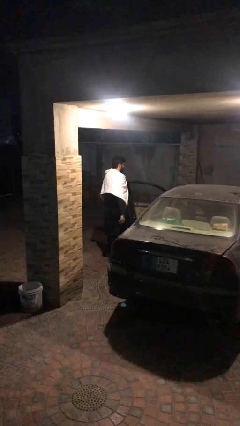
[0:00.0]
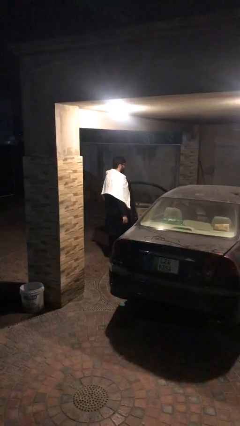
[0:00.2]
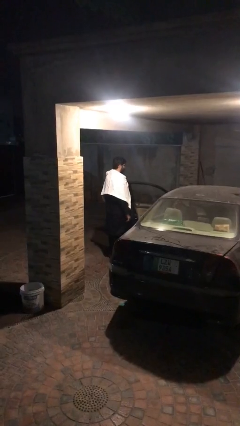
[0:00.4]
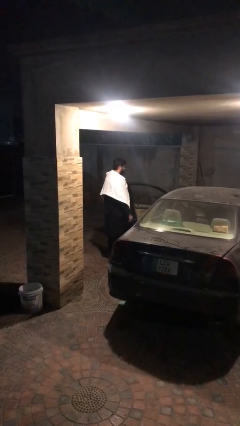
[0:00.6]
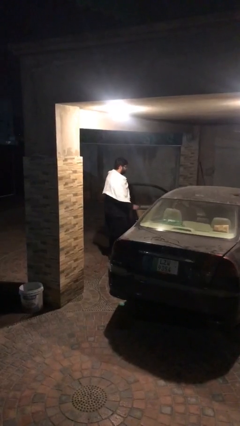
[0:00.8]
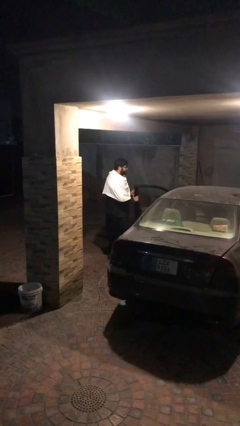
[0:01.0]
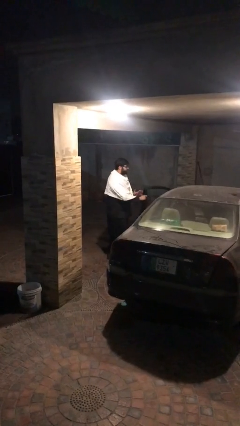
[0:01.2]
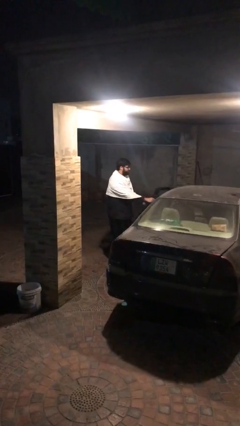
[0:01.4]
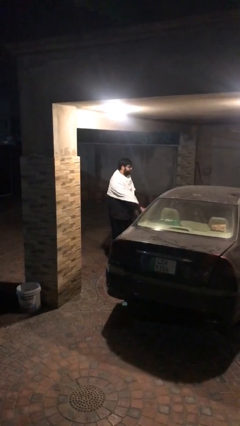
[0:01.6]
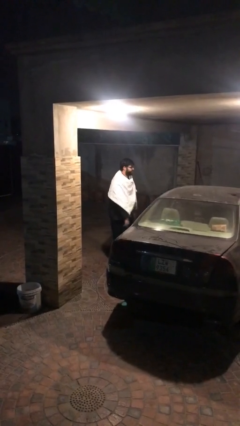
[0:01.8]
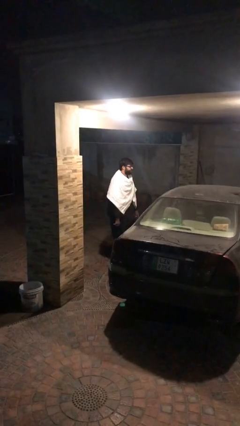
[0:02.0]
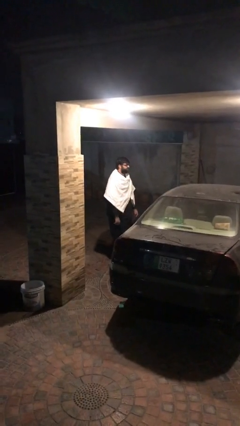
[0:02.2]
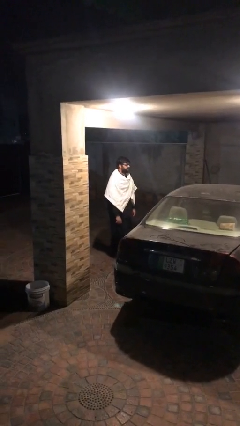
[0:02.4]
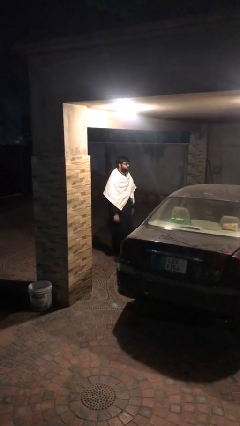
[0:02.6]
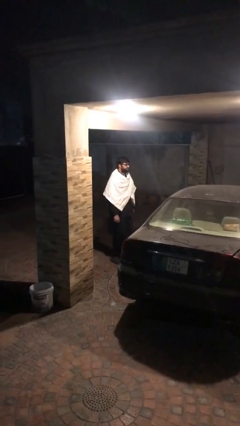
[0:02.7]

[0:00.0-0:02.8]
person closes car door

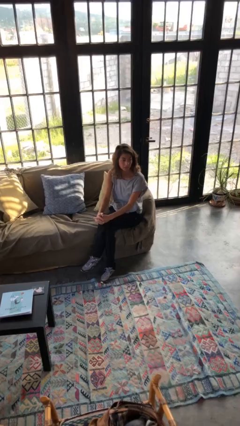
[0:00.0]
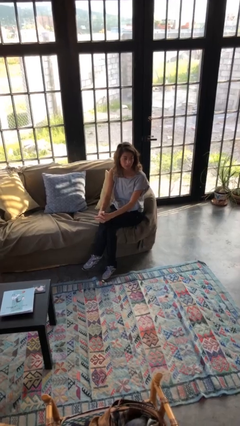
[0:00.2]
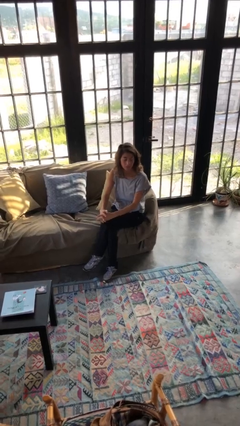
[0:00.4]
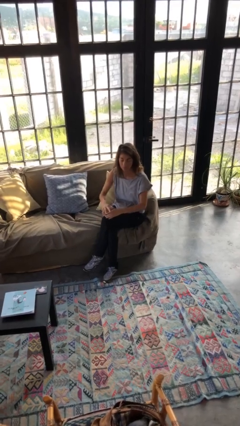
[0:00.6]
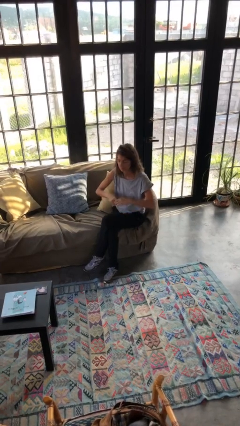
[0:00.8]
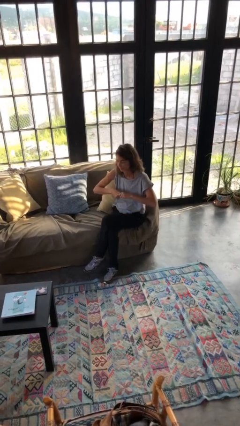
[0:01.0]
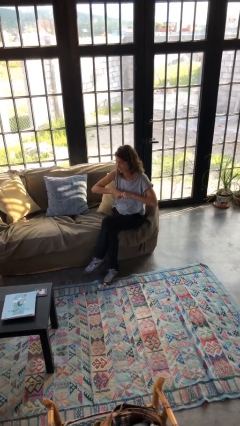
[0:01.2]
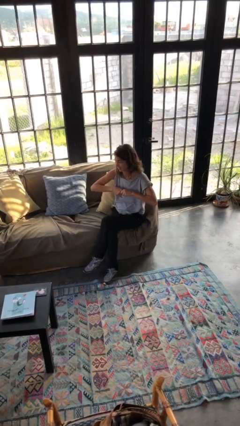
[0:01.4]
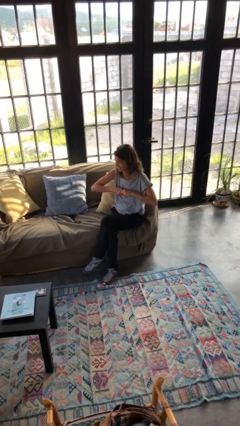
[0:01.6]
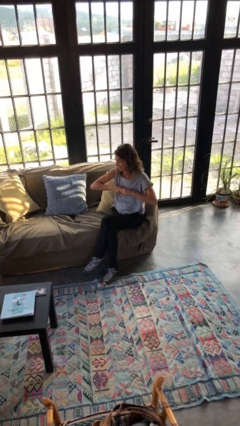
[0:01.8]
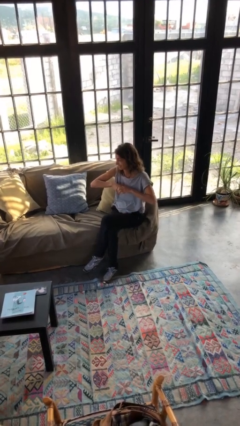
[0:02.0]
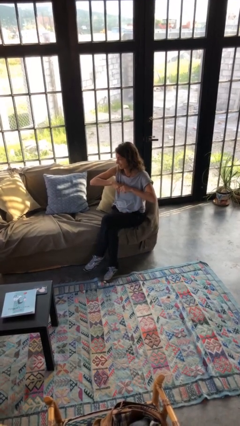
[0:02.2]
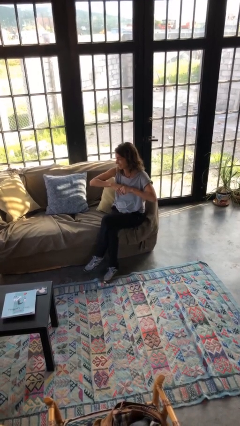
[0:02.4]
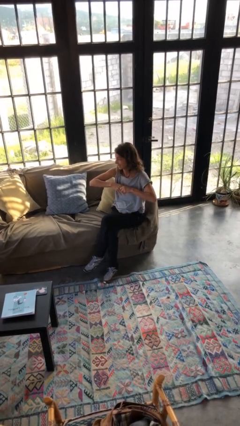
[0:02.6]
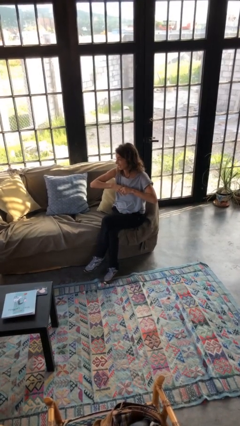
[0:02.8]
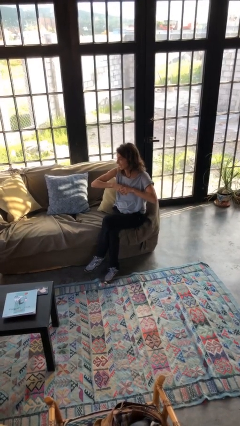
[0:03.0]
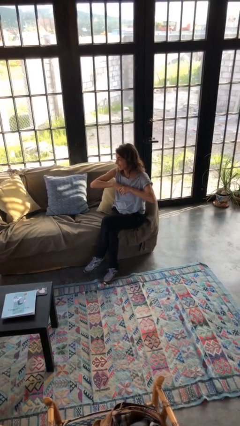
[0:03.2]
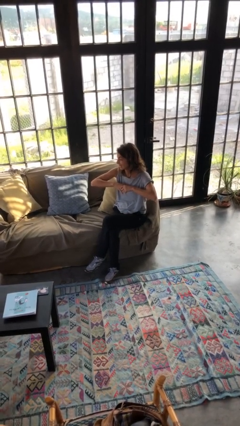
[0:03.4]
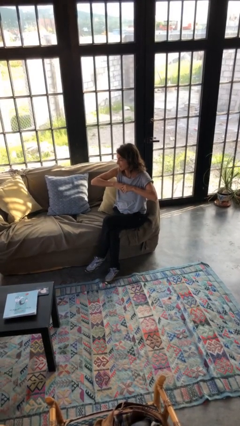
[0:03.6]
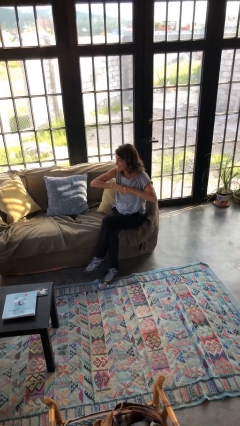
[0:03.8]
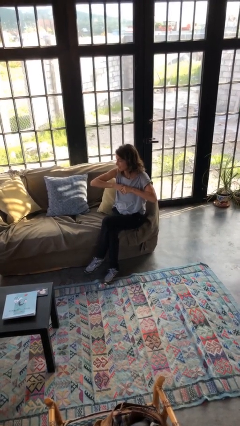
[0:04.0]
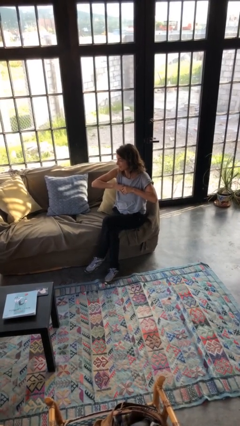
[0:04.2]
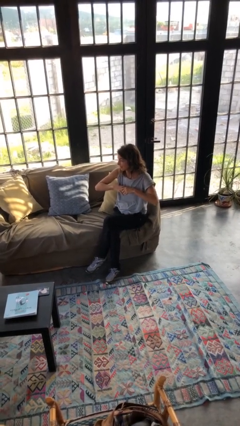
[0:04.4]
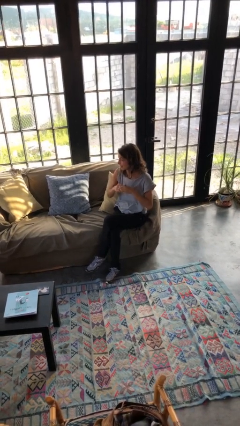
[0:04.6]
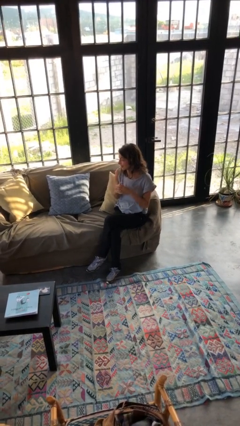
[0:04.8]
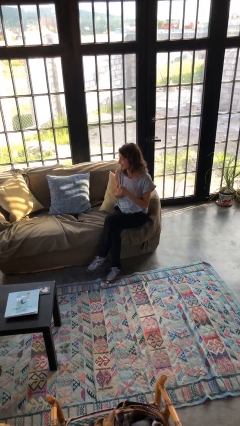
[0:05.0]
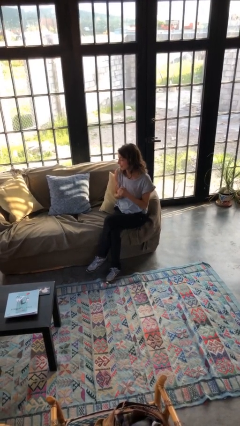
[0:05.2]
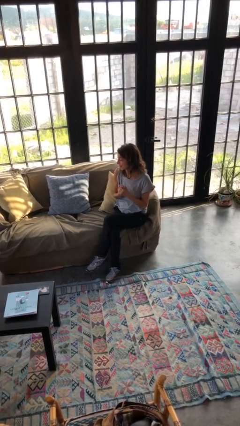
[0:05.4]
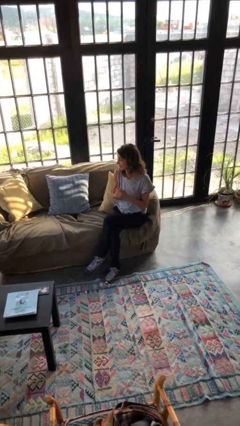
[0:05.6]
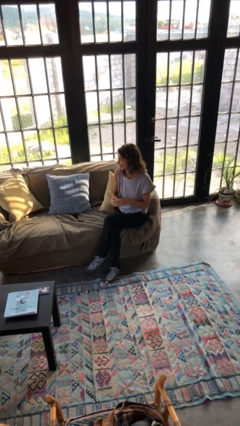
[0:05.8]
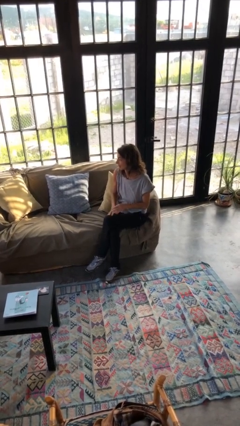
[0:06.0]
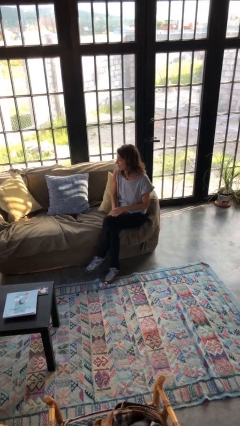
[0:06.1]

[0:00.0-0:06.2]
person cracks knuckles

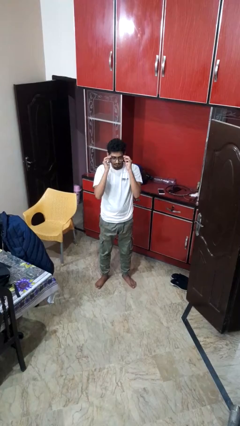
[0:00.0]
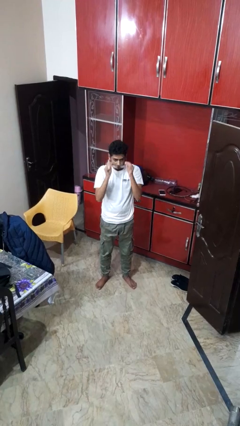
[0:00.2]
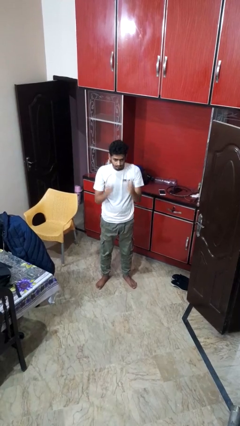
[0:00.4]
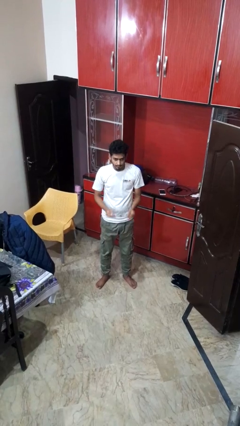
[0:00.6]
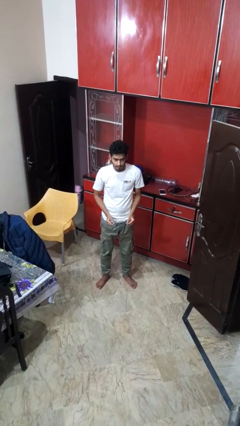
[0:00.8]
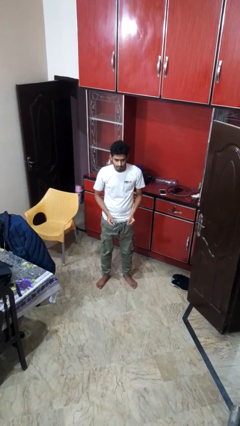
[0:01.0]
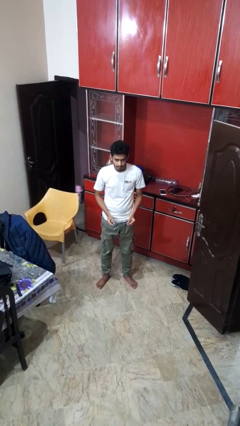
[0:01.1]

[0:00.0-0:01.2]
person takes off glasses

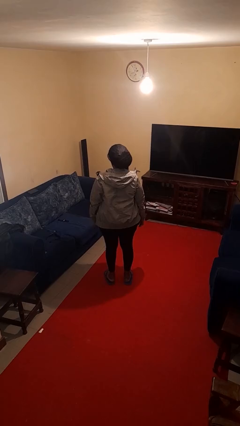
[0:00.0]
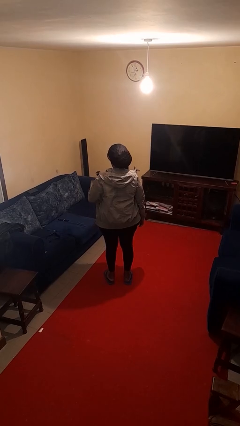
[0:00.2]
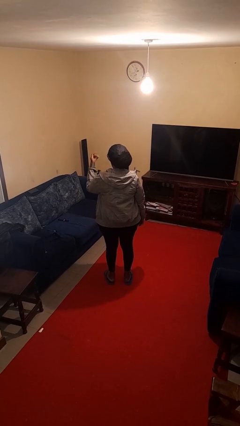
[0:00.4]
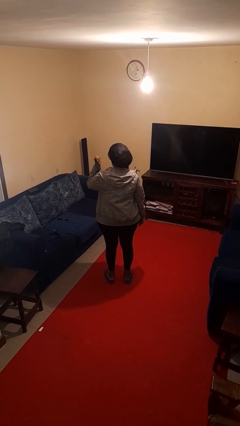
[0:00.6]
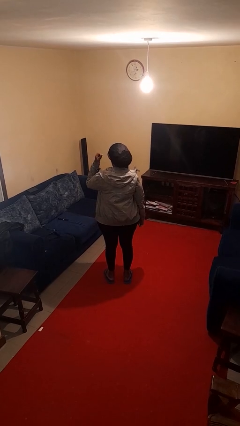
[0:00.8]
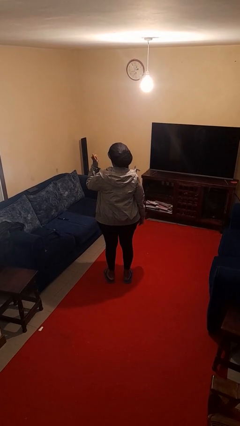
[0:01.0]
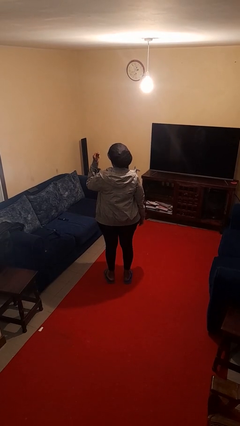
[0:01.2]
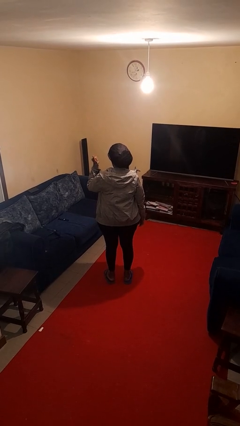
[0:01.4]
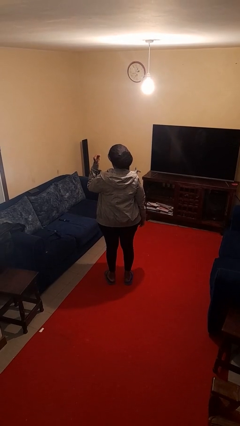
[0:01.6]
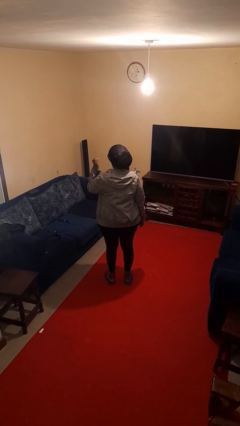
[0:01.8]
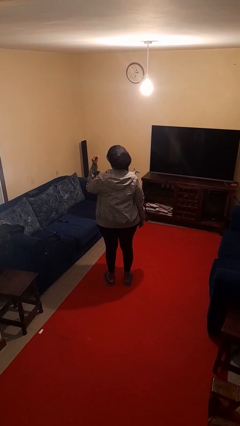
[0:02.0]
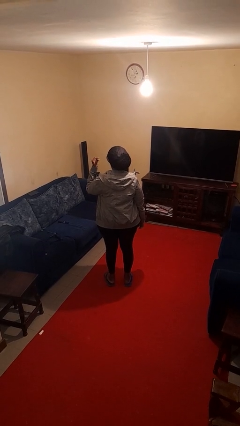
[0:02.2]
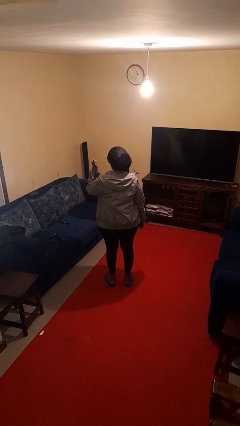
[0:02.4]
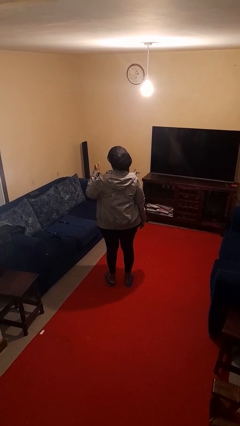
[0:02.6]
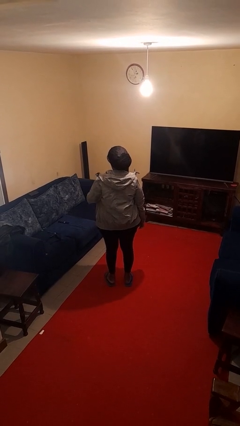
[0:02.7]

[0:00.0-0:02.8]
person snaps fingers

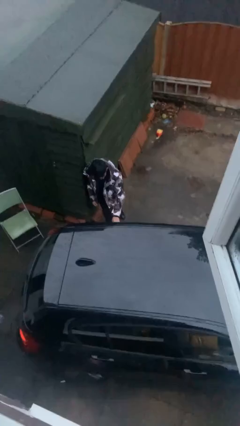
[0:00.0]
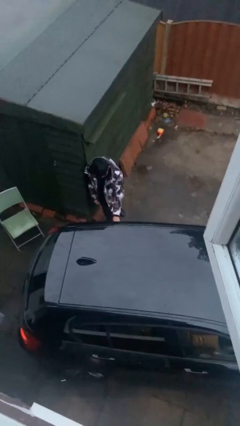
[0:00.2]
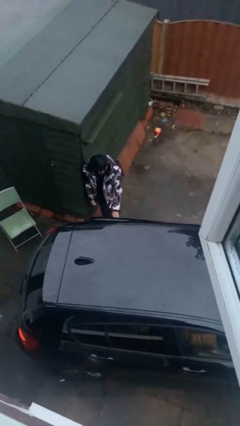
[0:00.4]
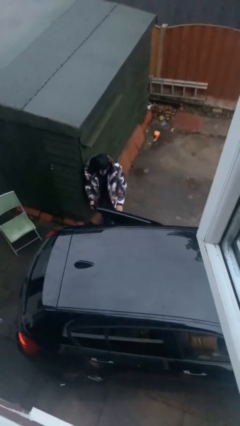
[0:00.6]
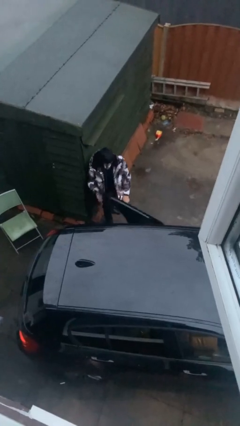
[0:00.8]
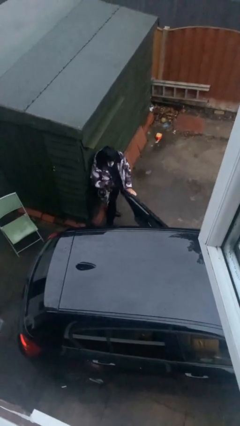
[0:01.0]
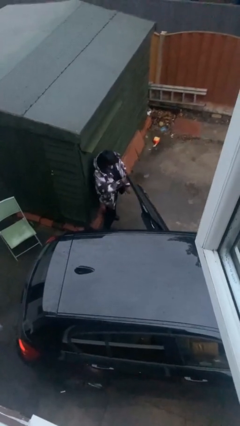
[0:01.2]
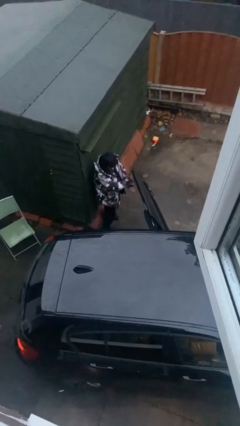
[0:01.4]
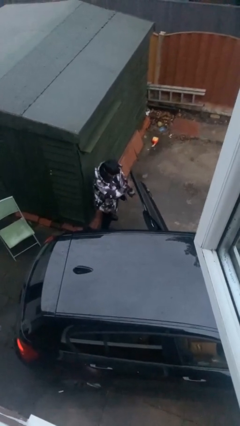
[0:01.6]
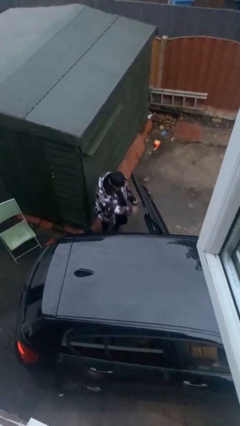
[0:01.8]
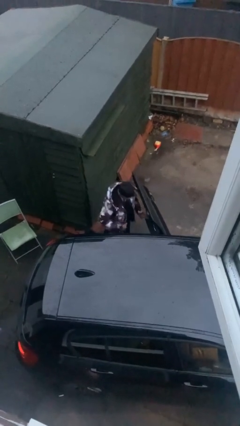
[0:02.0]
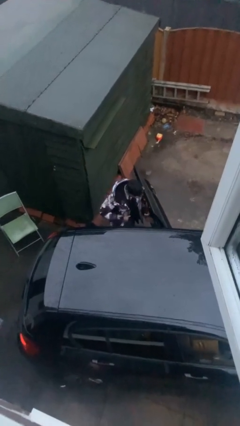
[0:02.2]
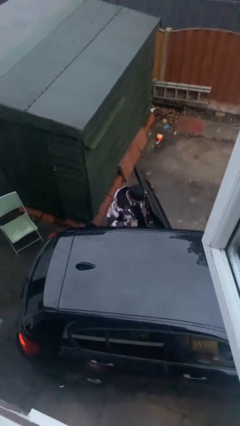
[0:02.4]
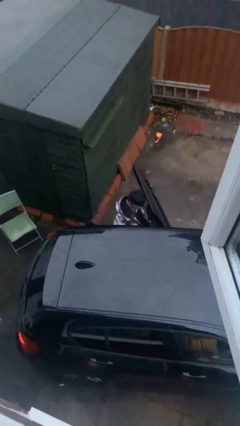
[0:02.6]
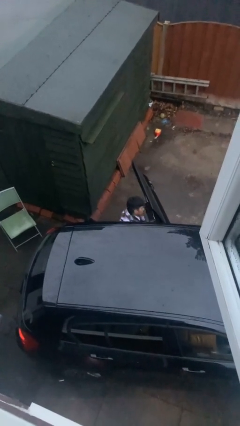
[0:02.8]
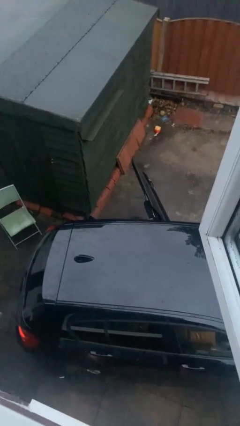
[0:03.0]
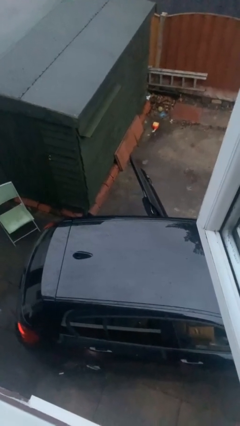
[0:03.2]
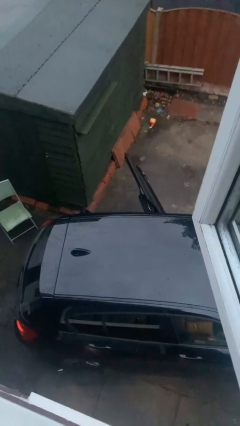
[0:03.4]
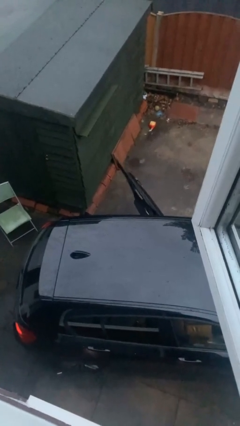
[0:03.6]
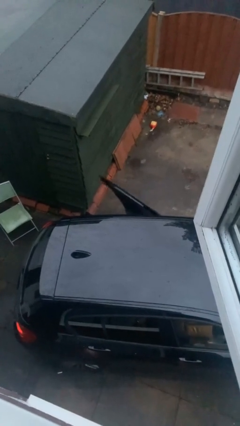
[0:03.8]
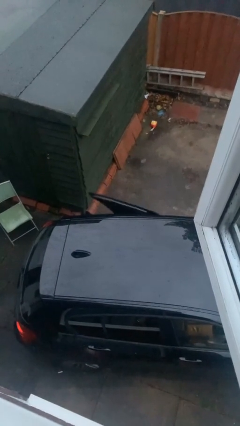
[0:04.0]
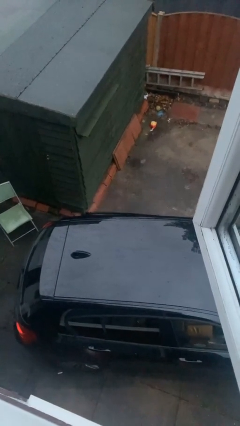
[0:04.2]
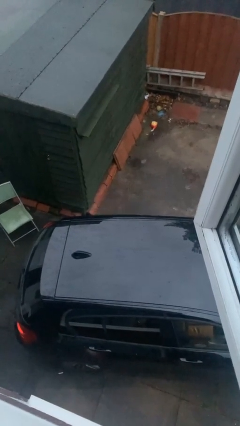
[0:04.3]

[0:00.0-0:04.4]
car picks up person

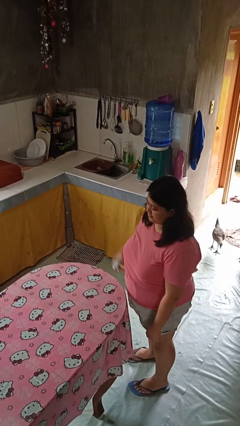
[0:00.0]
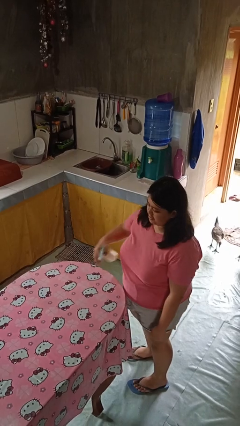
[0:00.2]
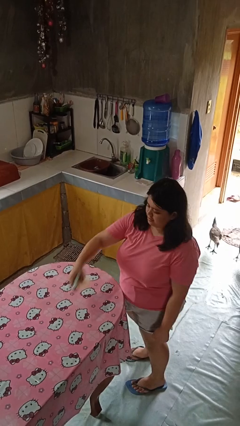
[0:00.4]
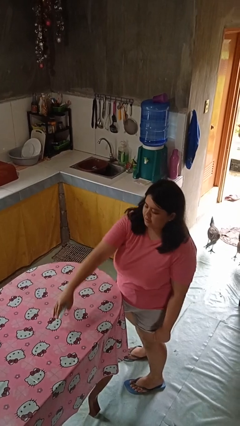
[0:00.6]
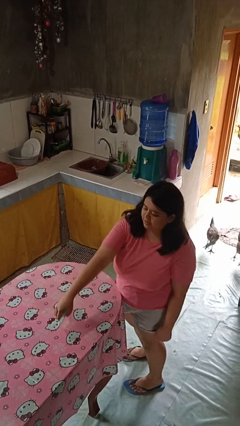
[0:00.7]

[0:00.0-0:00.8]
person sprays from bottle
